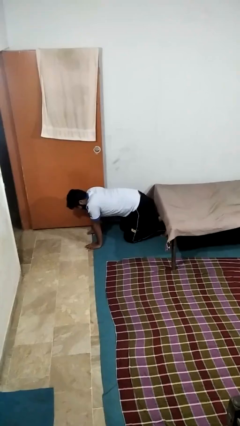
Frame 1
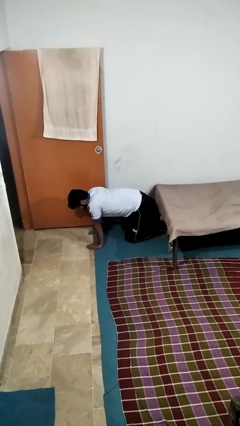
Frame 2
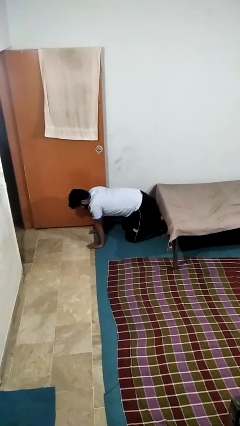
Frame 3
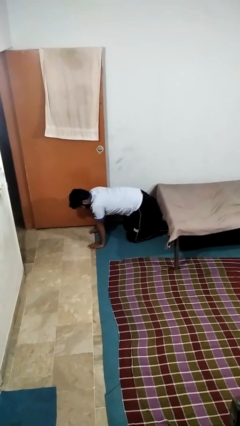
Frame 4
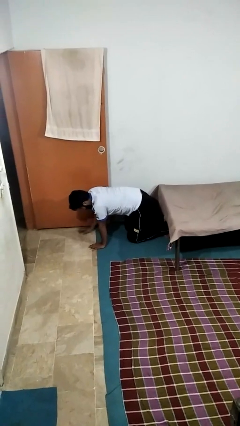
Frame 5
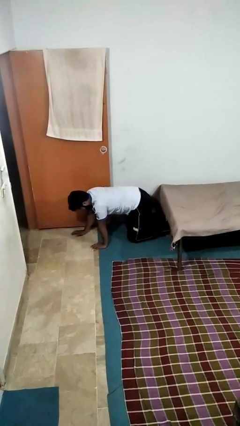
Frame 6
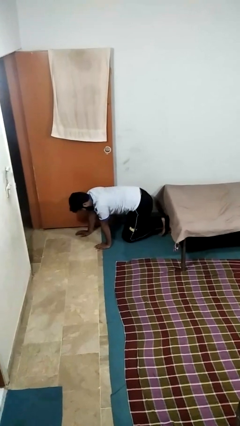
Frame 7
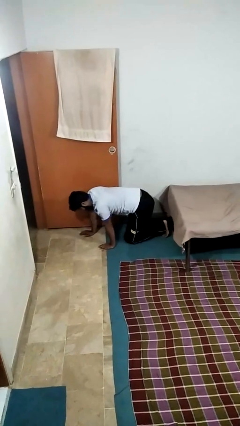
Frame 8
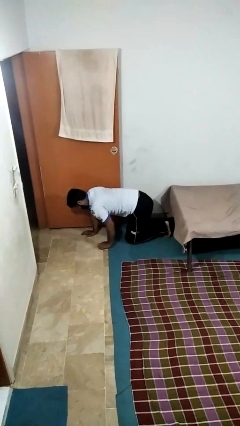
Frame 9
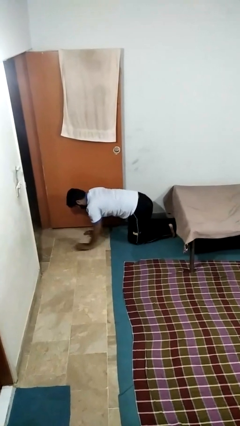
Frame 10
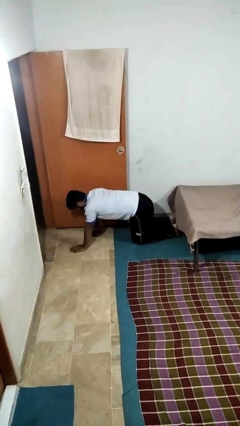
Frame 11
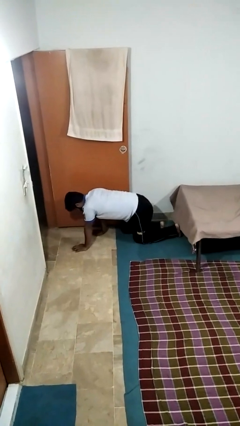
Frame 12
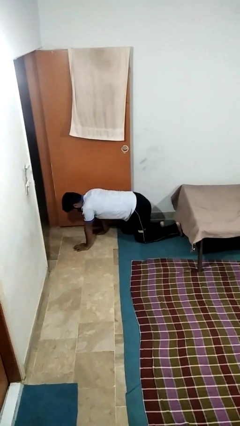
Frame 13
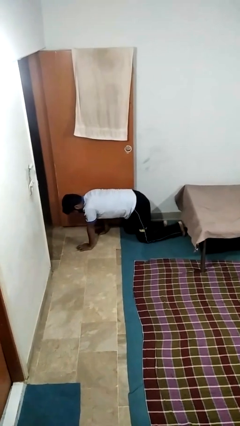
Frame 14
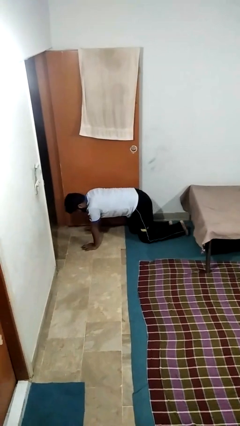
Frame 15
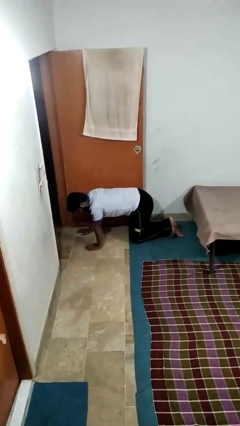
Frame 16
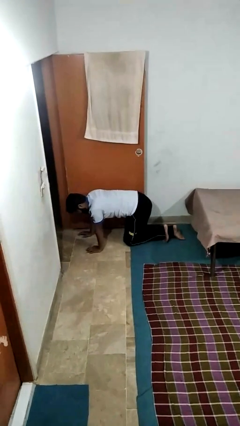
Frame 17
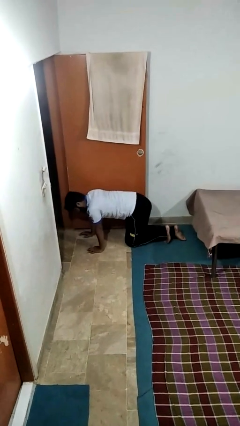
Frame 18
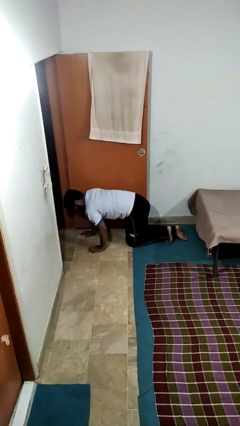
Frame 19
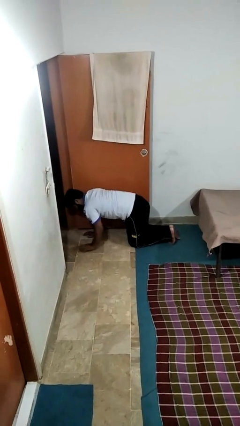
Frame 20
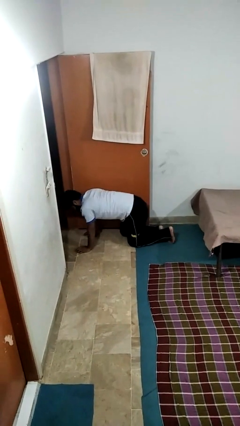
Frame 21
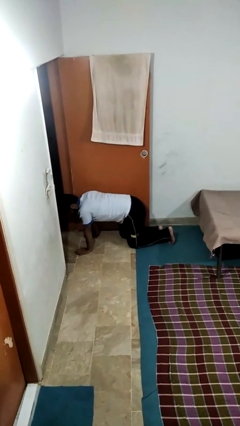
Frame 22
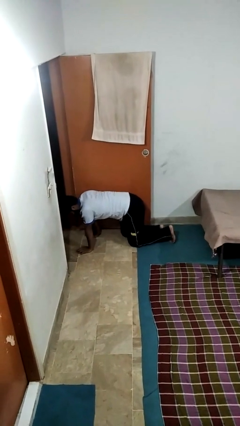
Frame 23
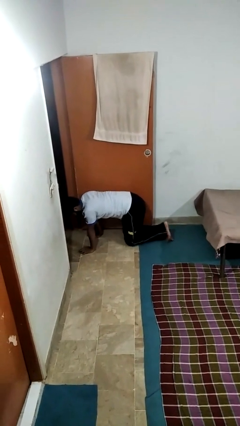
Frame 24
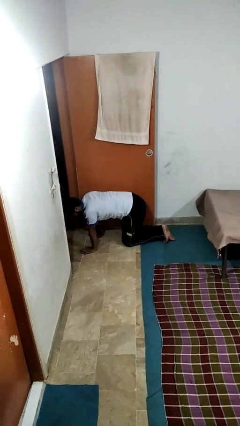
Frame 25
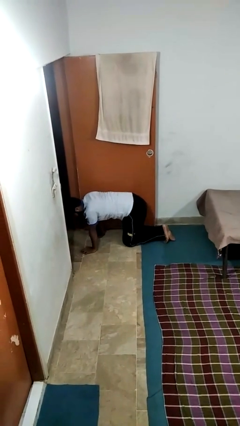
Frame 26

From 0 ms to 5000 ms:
person crawls

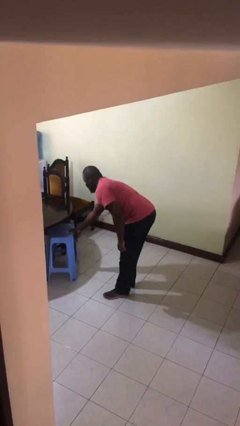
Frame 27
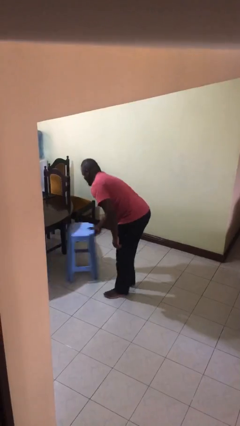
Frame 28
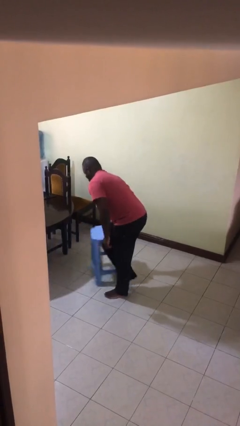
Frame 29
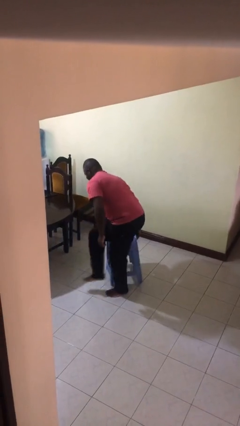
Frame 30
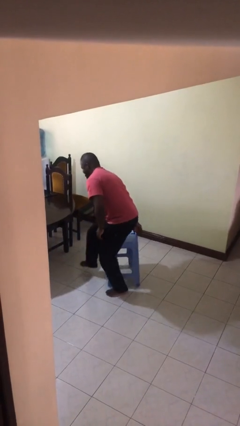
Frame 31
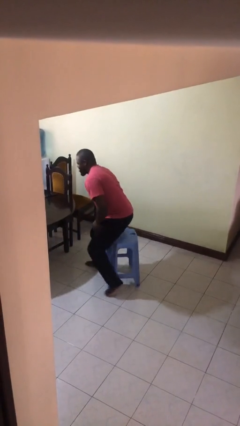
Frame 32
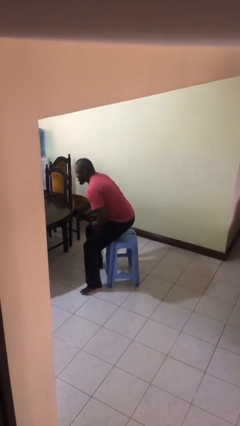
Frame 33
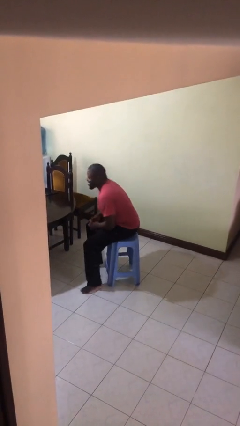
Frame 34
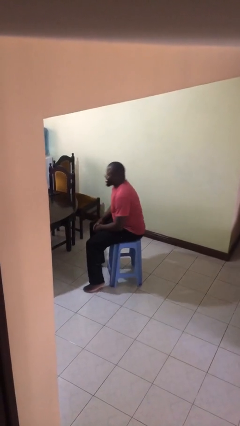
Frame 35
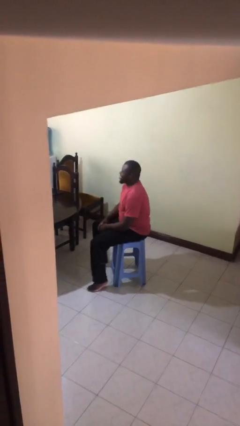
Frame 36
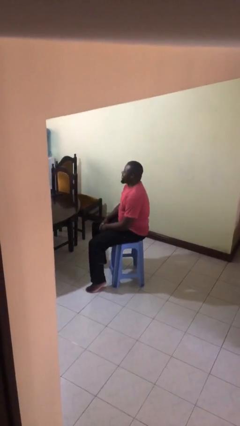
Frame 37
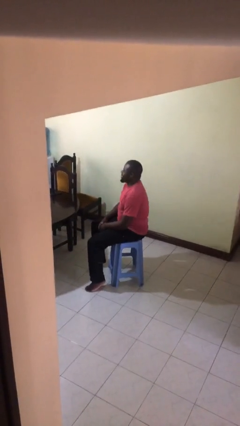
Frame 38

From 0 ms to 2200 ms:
person sits down

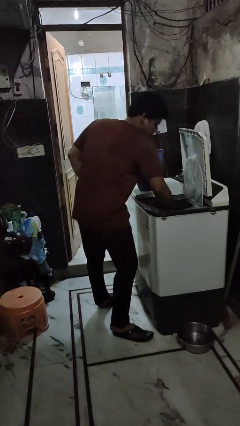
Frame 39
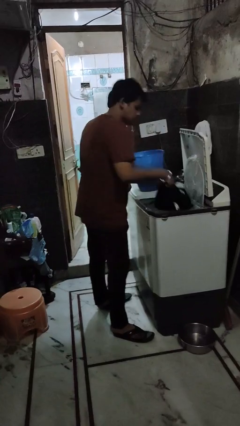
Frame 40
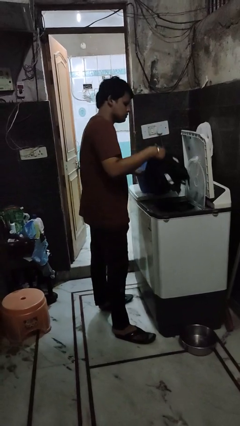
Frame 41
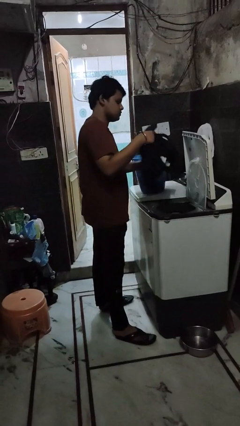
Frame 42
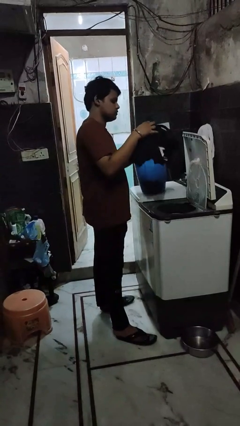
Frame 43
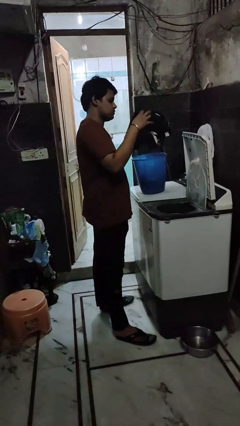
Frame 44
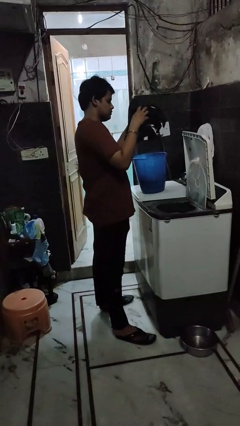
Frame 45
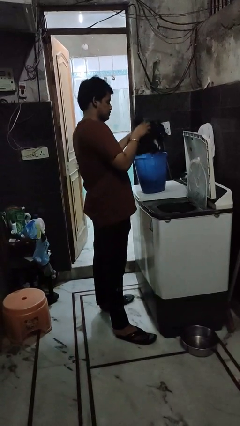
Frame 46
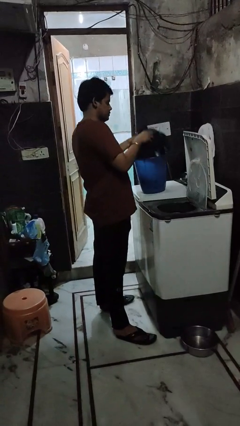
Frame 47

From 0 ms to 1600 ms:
person unloads dryer

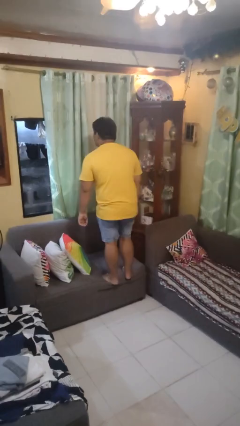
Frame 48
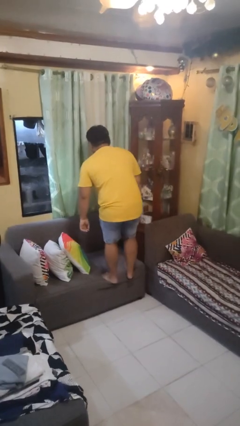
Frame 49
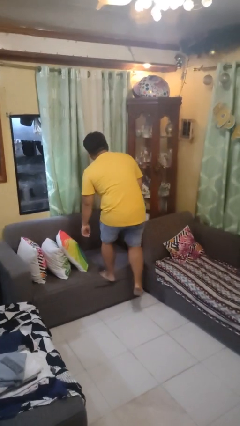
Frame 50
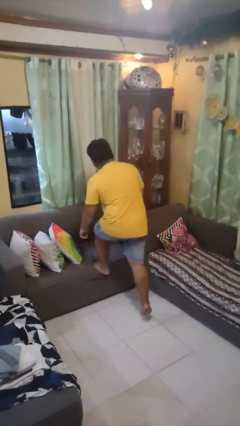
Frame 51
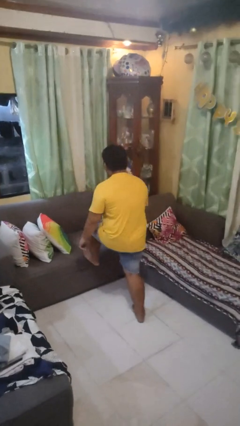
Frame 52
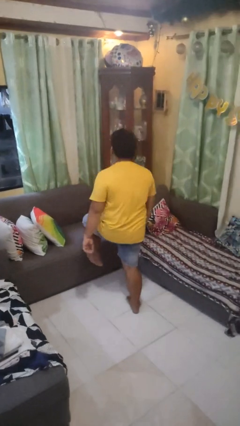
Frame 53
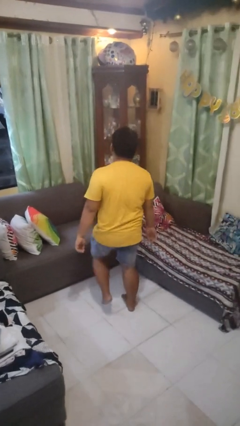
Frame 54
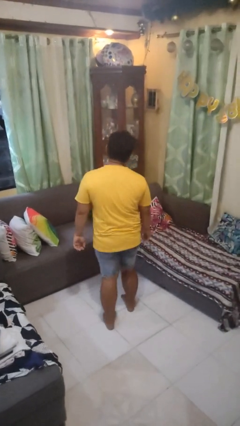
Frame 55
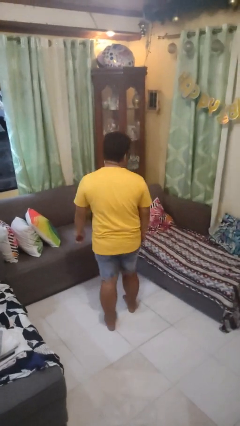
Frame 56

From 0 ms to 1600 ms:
person climbs off couch

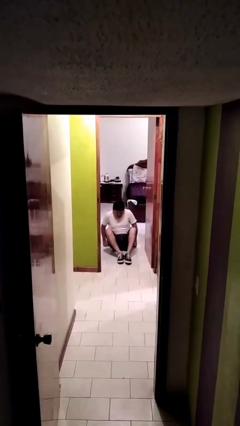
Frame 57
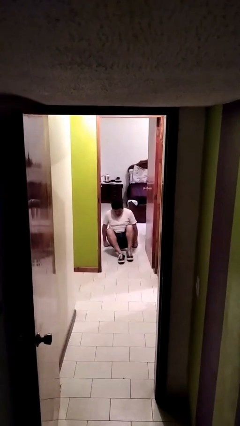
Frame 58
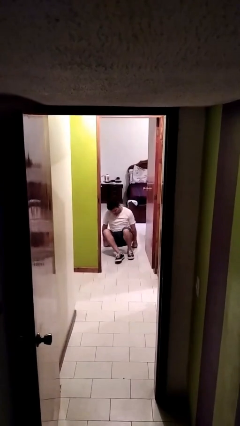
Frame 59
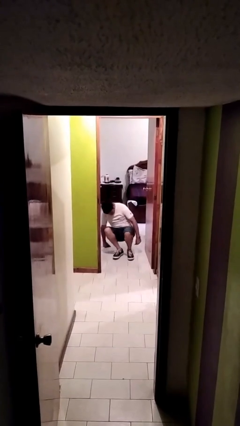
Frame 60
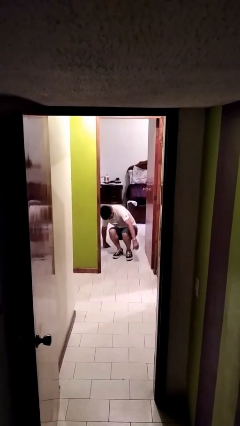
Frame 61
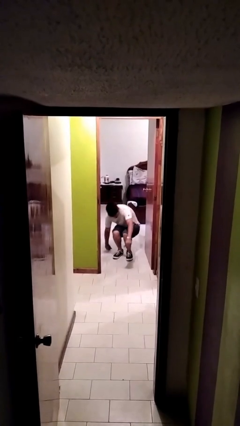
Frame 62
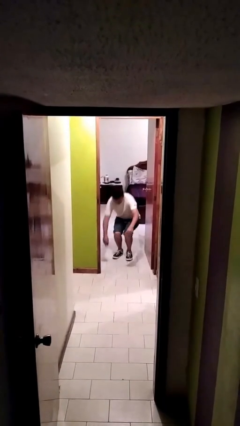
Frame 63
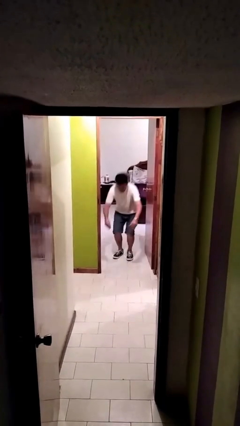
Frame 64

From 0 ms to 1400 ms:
person stands up

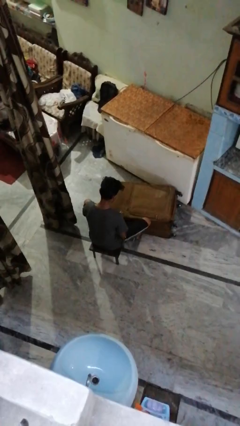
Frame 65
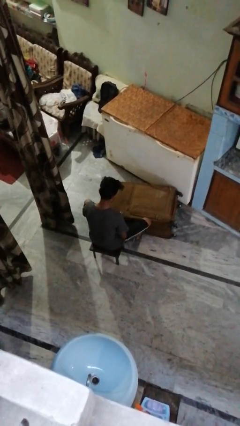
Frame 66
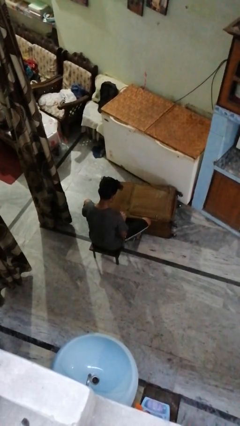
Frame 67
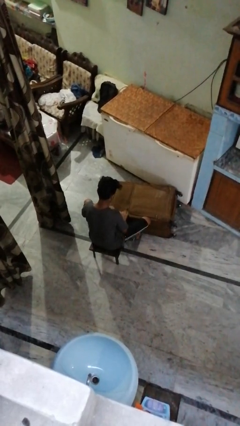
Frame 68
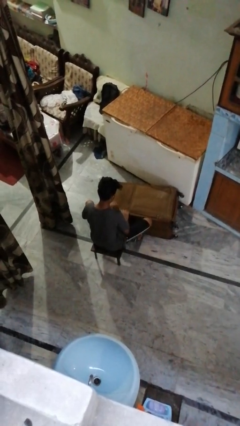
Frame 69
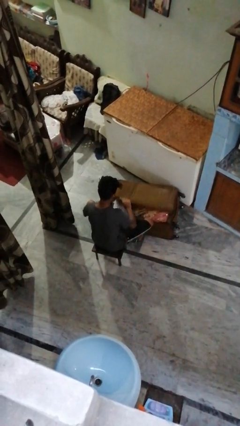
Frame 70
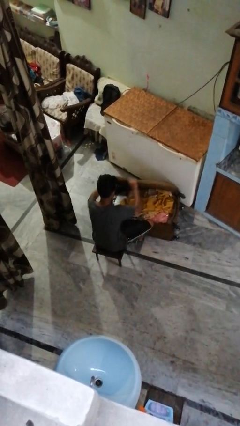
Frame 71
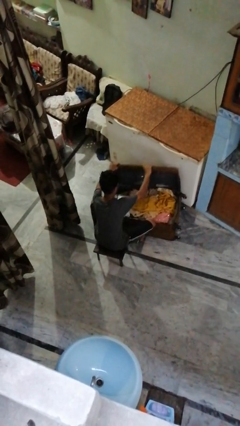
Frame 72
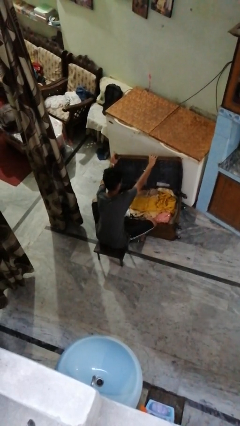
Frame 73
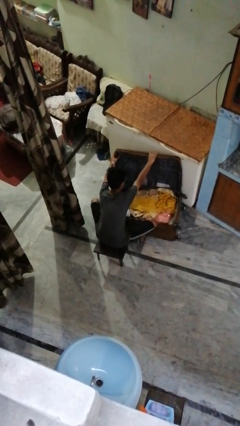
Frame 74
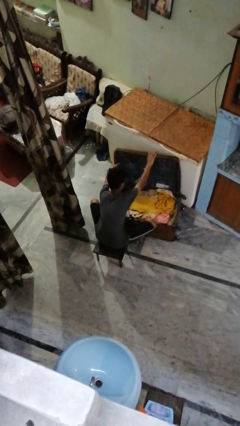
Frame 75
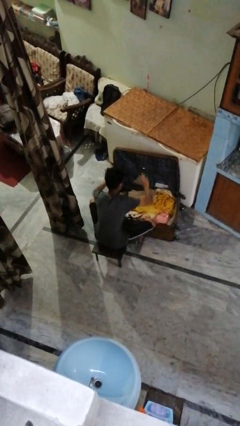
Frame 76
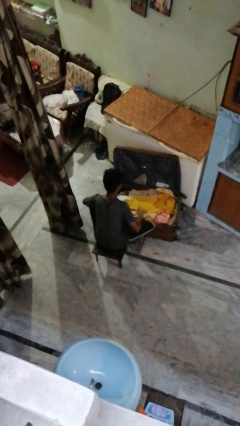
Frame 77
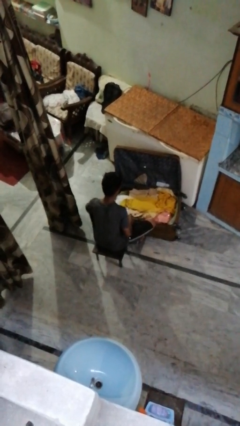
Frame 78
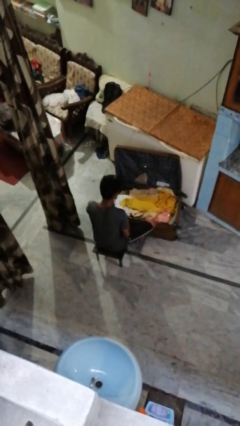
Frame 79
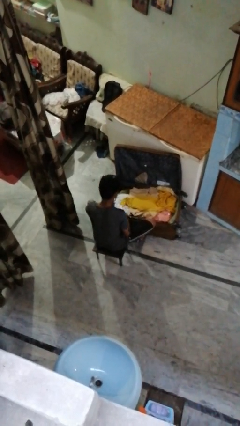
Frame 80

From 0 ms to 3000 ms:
person opens suitcase

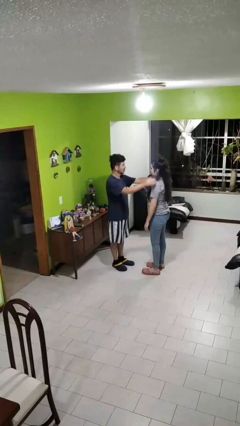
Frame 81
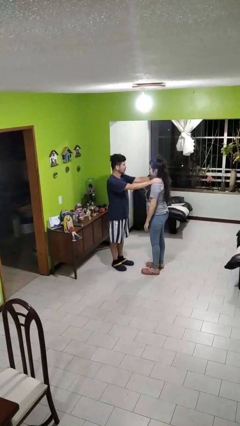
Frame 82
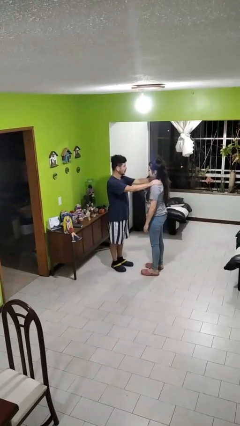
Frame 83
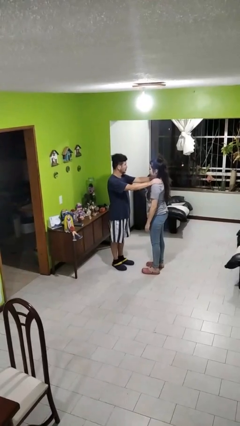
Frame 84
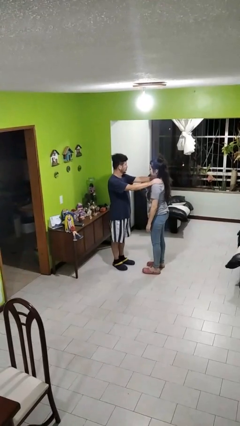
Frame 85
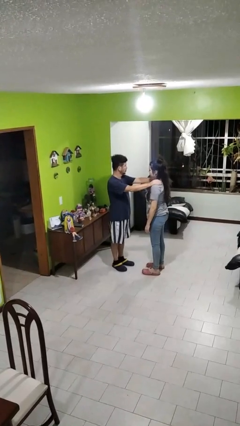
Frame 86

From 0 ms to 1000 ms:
person grabs person by shoulder

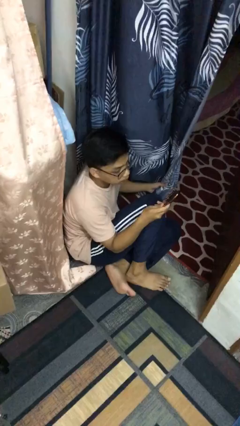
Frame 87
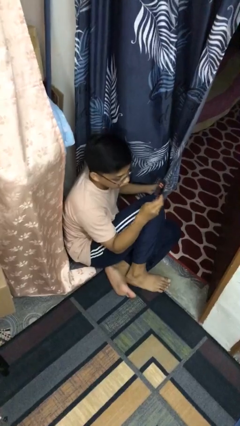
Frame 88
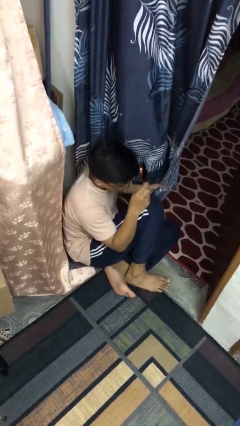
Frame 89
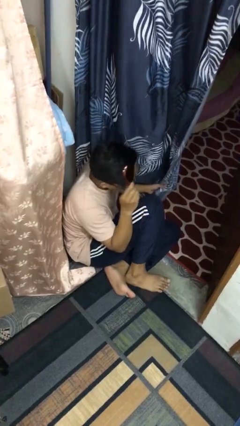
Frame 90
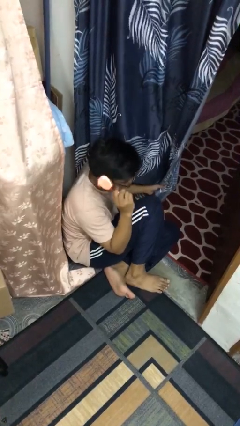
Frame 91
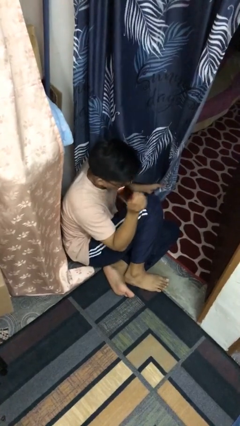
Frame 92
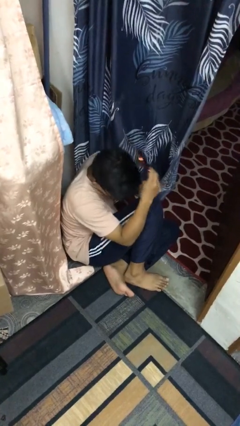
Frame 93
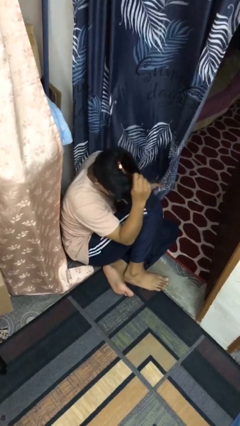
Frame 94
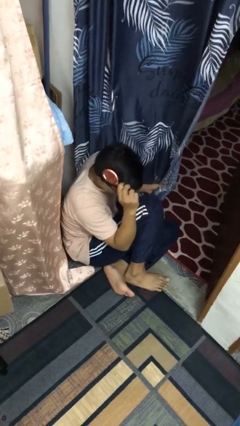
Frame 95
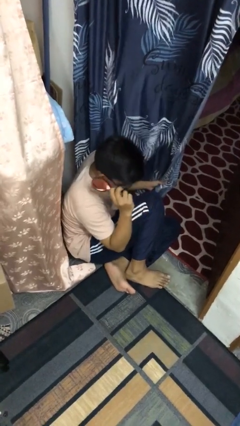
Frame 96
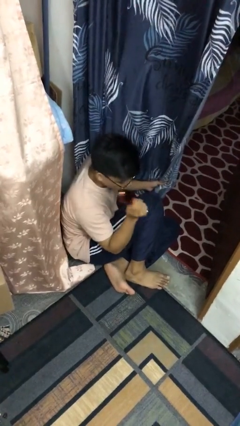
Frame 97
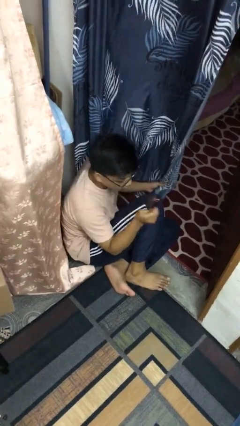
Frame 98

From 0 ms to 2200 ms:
person brushes hair
